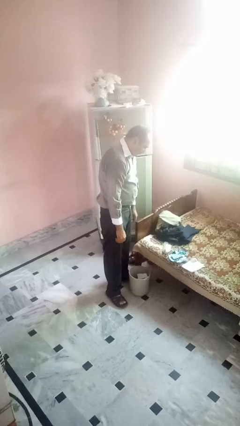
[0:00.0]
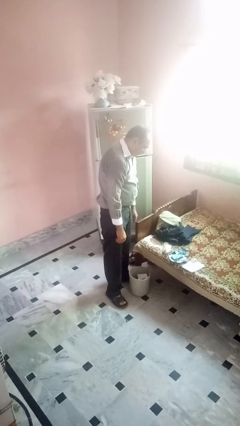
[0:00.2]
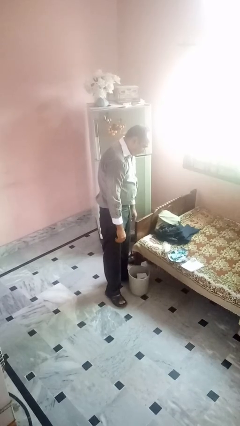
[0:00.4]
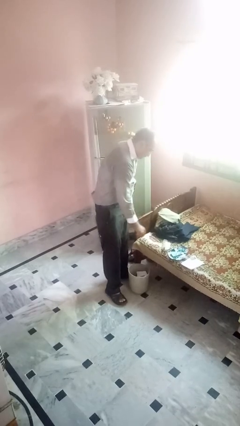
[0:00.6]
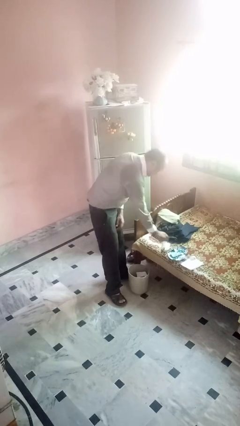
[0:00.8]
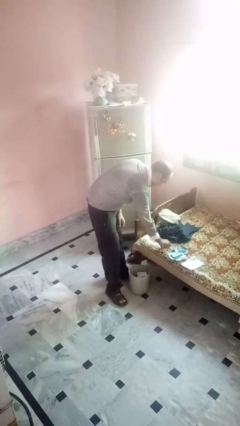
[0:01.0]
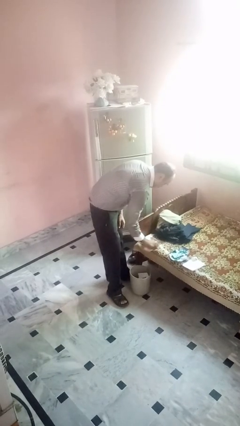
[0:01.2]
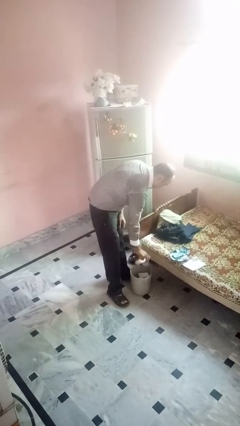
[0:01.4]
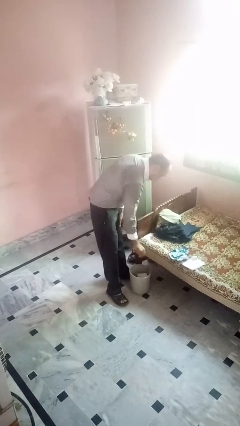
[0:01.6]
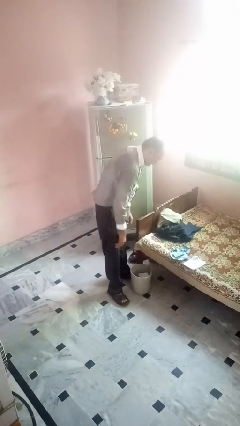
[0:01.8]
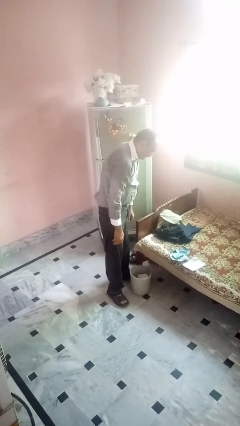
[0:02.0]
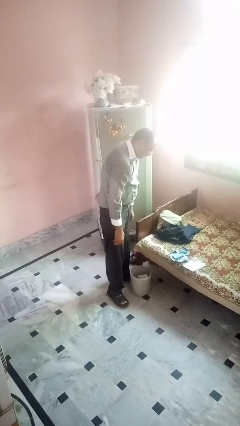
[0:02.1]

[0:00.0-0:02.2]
person discards trash

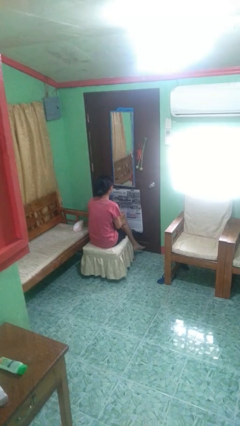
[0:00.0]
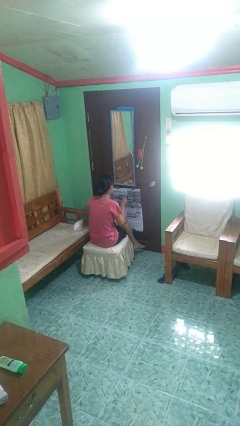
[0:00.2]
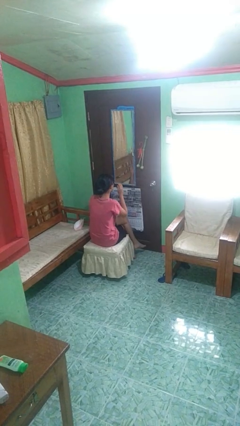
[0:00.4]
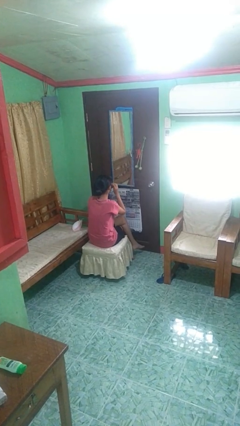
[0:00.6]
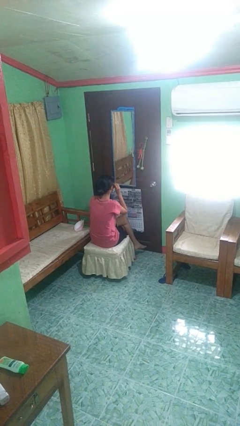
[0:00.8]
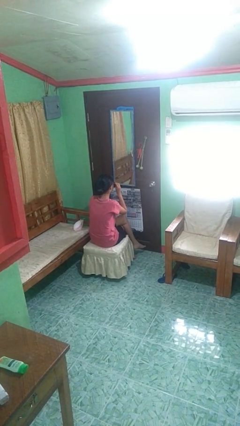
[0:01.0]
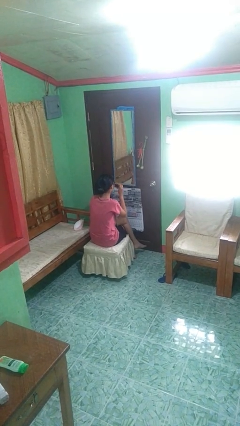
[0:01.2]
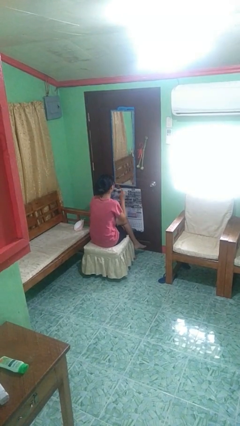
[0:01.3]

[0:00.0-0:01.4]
person takes off sunglasses

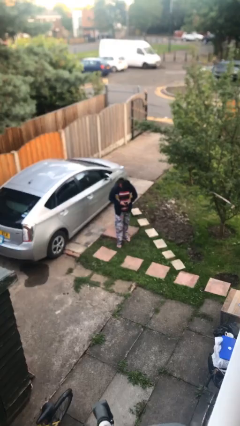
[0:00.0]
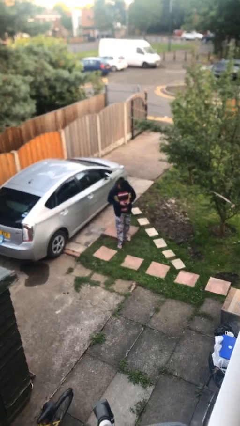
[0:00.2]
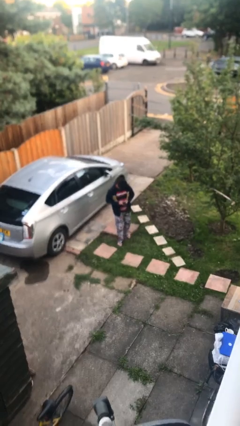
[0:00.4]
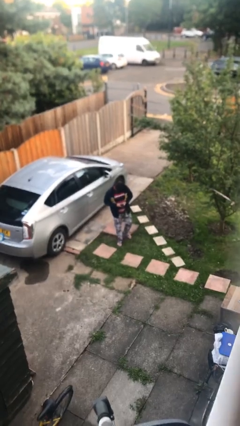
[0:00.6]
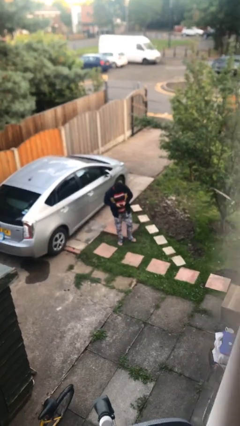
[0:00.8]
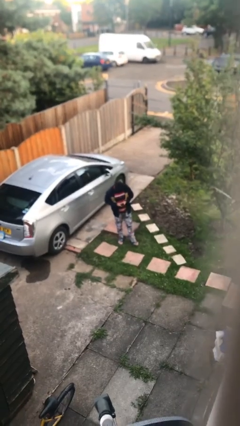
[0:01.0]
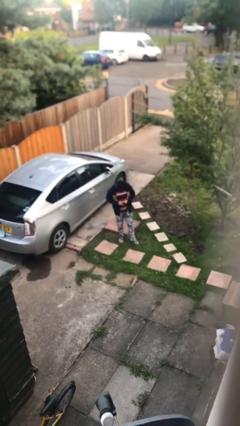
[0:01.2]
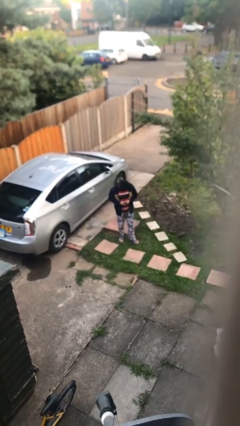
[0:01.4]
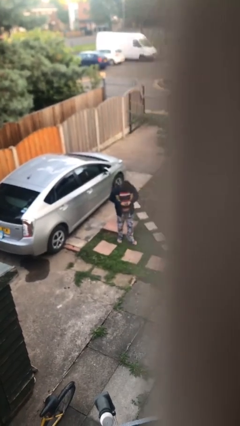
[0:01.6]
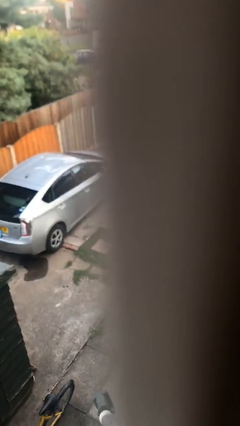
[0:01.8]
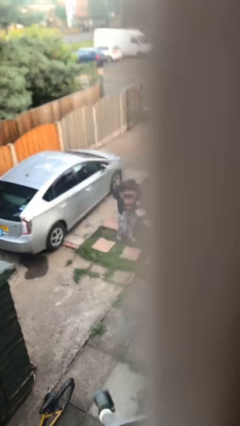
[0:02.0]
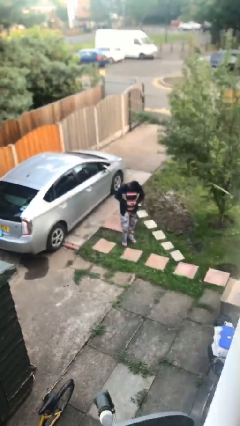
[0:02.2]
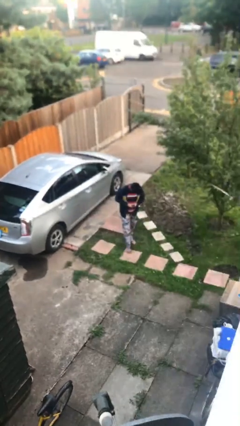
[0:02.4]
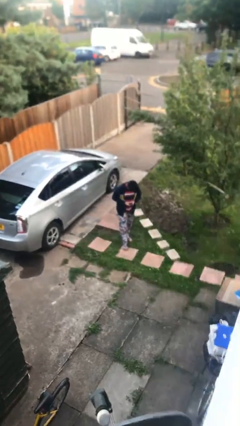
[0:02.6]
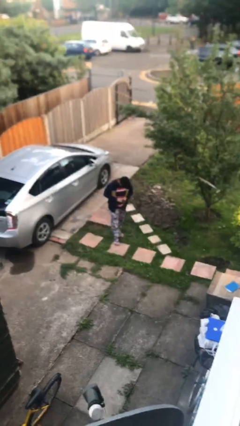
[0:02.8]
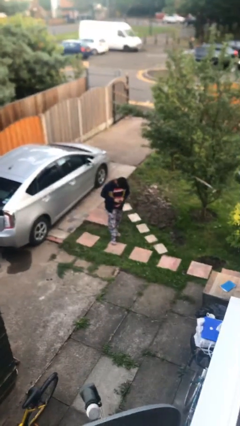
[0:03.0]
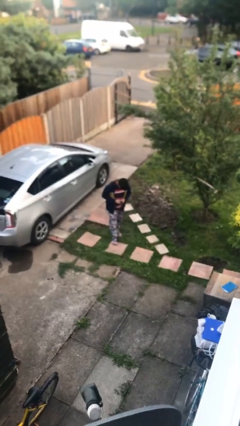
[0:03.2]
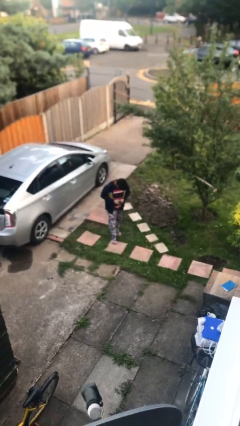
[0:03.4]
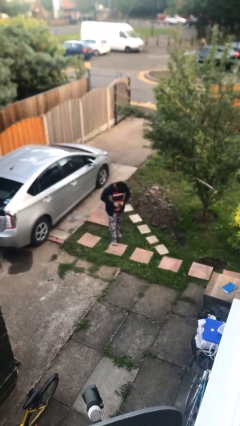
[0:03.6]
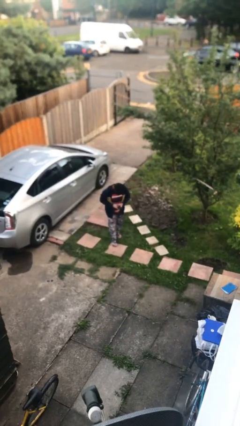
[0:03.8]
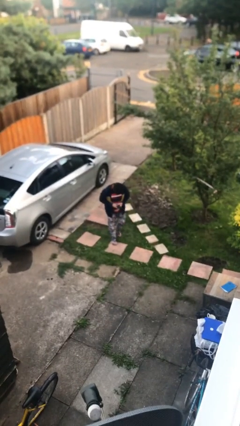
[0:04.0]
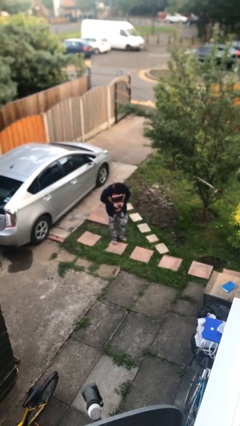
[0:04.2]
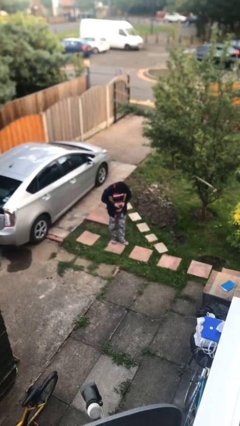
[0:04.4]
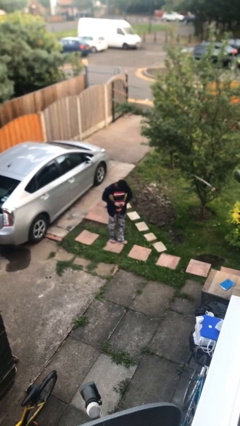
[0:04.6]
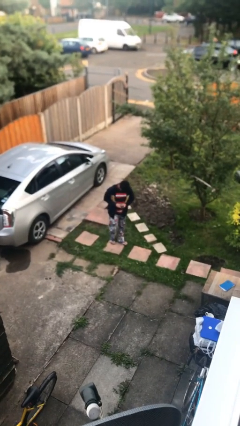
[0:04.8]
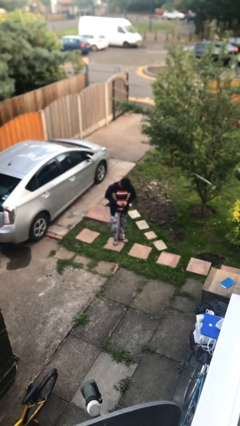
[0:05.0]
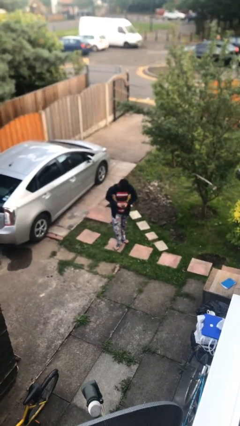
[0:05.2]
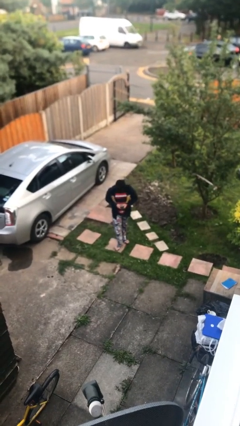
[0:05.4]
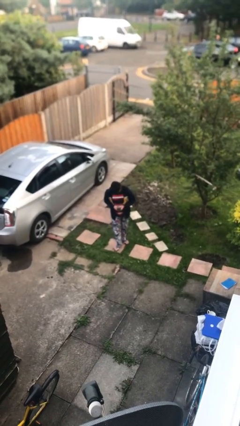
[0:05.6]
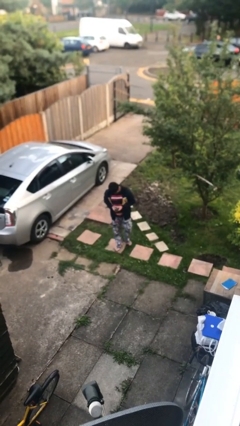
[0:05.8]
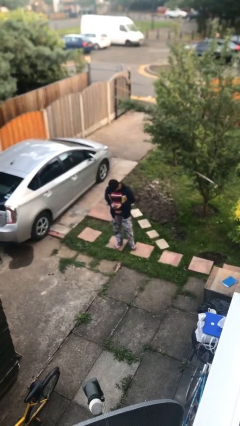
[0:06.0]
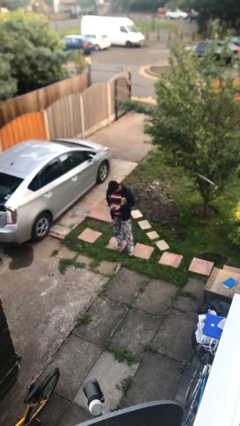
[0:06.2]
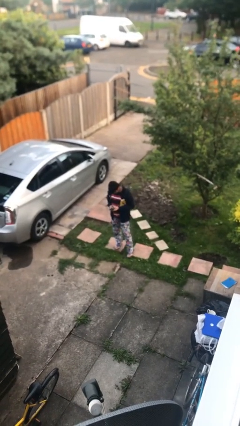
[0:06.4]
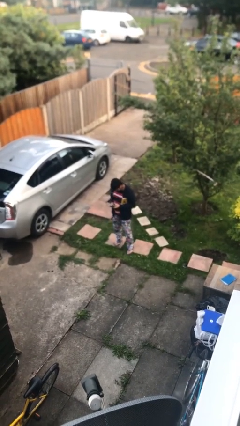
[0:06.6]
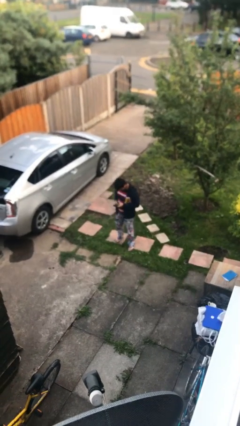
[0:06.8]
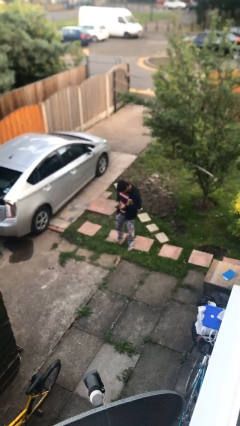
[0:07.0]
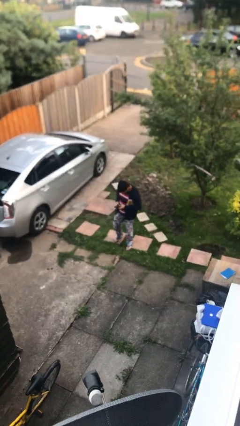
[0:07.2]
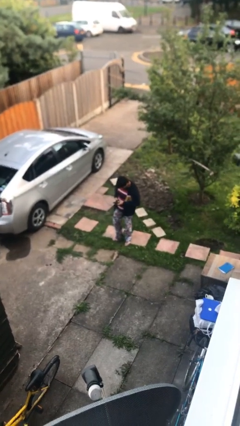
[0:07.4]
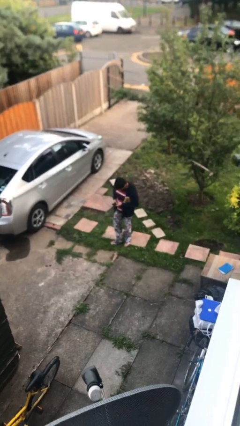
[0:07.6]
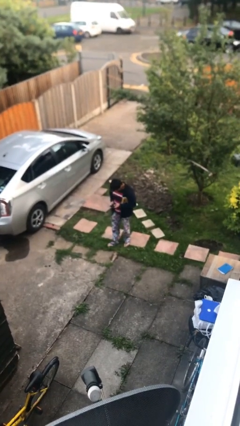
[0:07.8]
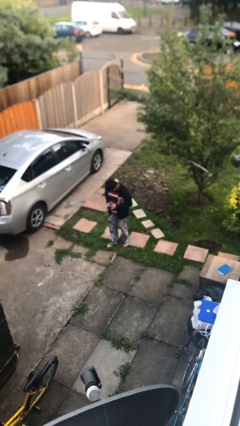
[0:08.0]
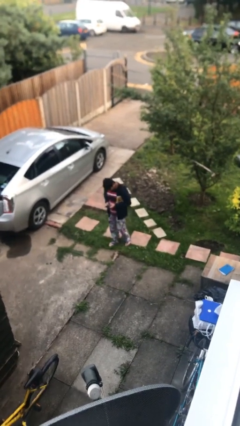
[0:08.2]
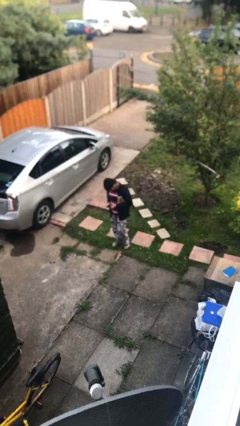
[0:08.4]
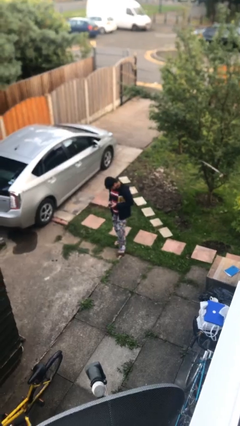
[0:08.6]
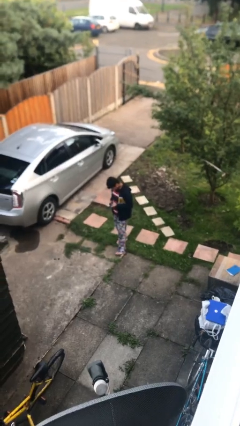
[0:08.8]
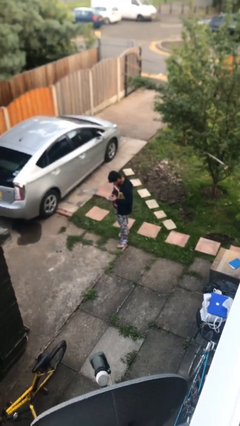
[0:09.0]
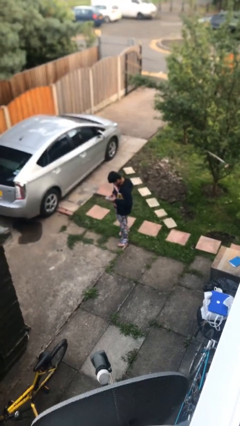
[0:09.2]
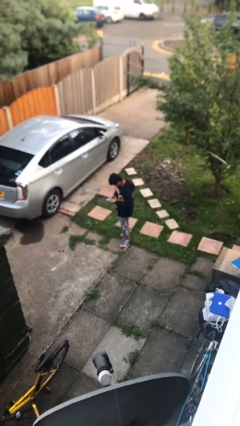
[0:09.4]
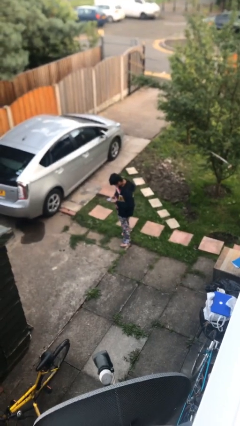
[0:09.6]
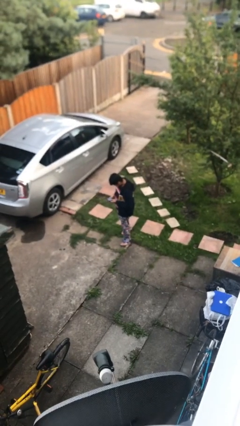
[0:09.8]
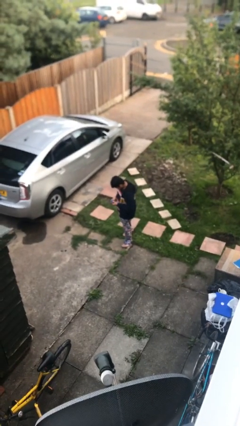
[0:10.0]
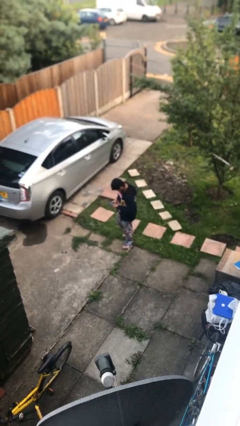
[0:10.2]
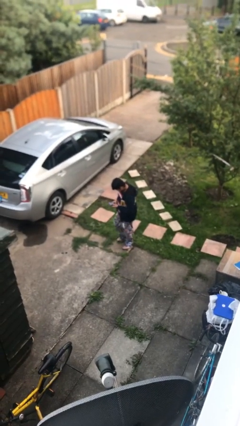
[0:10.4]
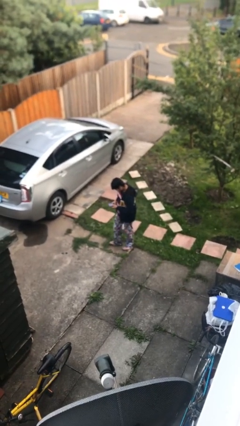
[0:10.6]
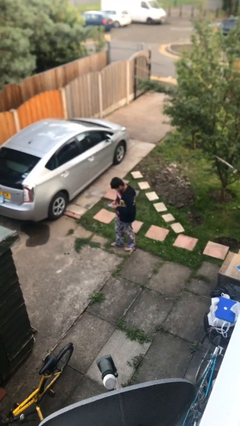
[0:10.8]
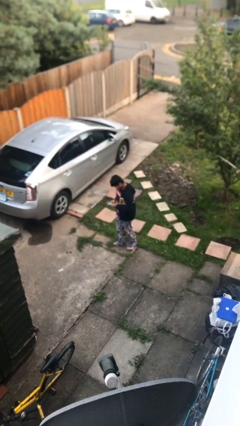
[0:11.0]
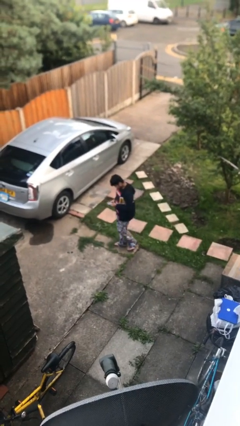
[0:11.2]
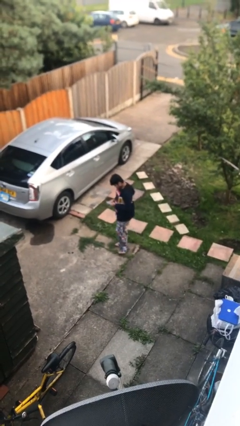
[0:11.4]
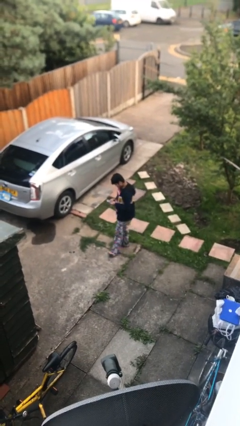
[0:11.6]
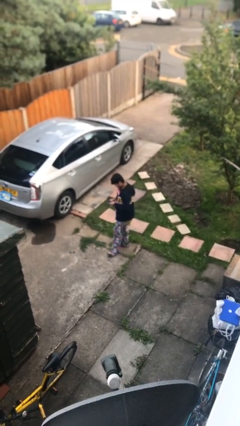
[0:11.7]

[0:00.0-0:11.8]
person texts on phone

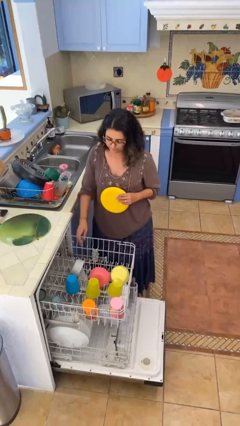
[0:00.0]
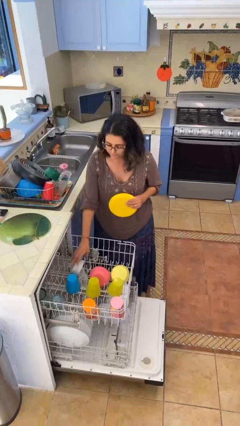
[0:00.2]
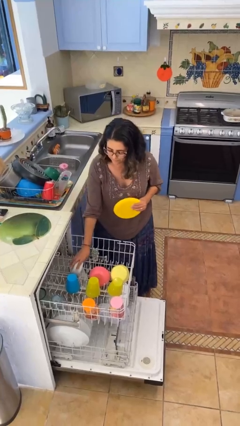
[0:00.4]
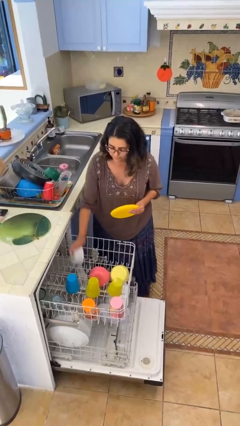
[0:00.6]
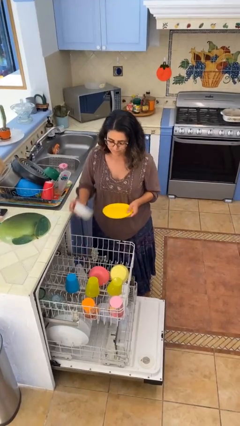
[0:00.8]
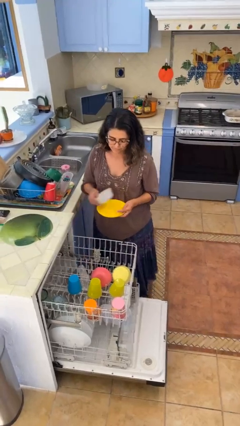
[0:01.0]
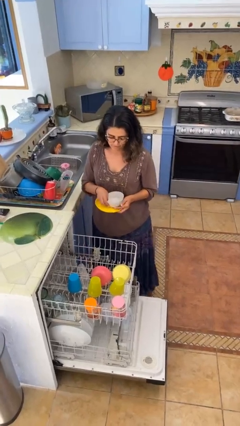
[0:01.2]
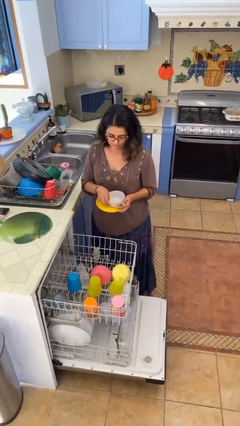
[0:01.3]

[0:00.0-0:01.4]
person unloads dishwasher

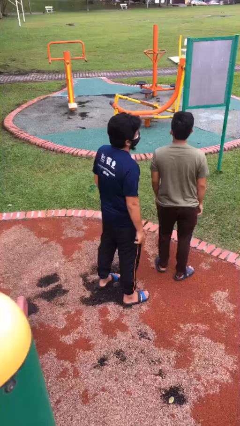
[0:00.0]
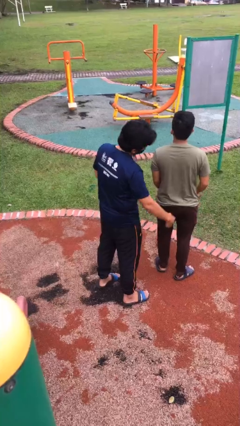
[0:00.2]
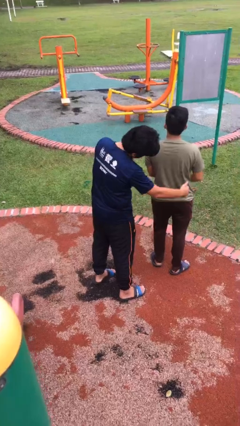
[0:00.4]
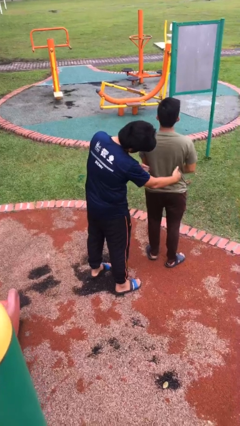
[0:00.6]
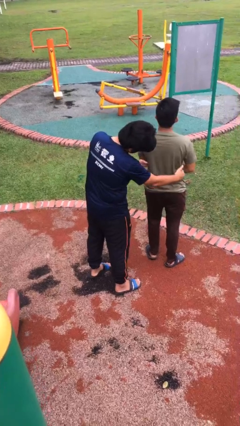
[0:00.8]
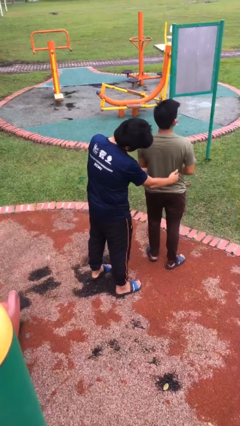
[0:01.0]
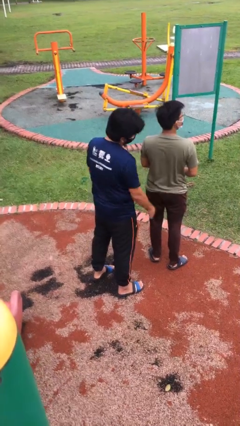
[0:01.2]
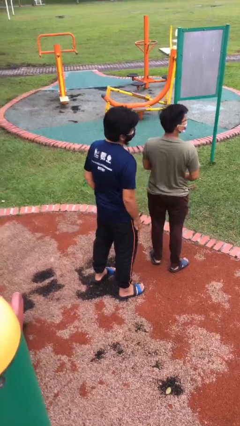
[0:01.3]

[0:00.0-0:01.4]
person tickles person
